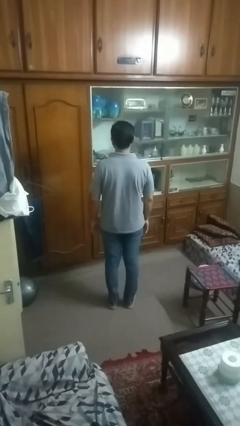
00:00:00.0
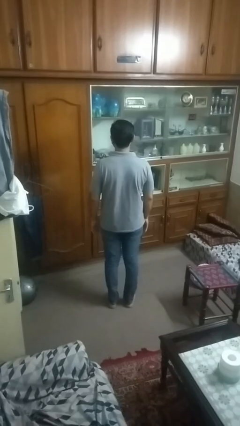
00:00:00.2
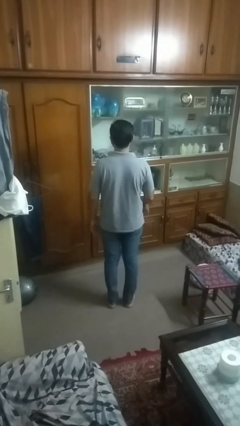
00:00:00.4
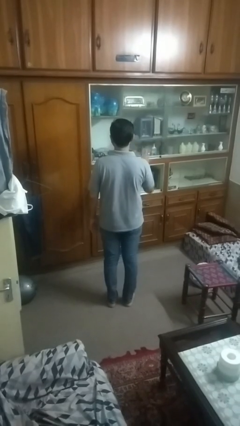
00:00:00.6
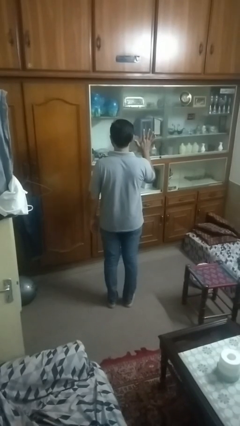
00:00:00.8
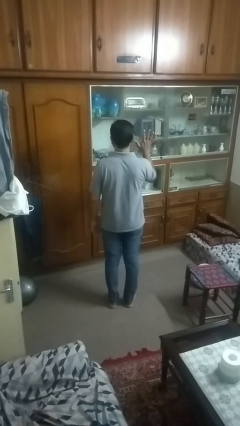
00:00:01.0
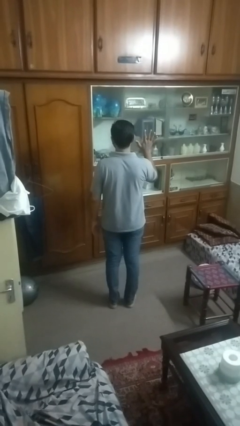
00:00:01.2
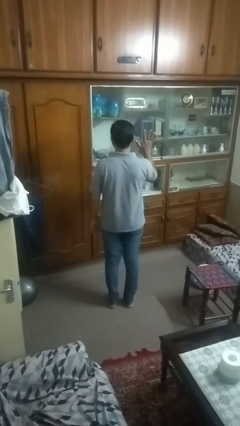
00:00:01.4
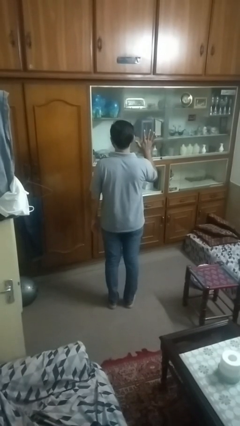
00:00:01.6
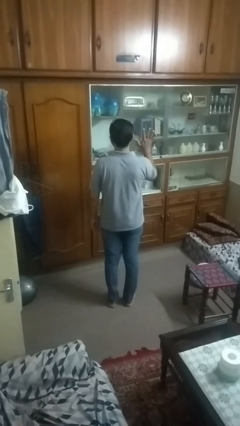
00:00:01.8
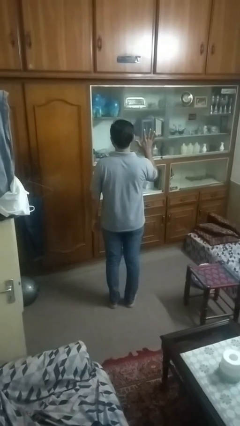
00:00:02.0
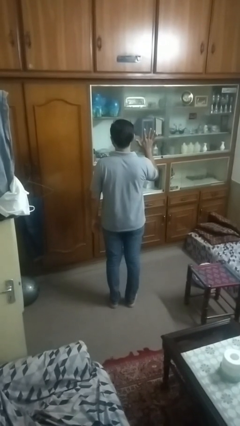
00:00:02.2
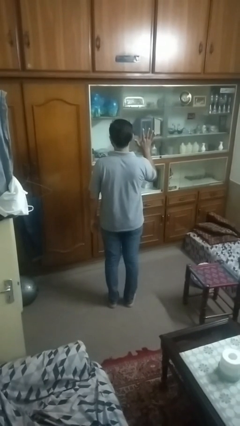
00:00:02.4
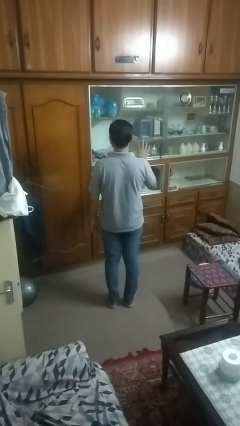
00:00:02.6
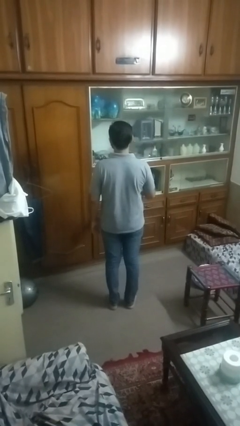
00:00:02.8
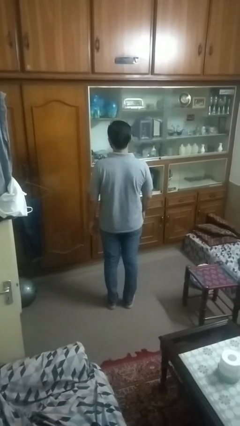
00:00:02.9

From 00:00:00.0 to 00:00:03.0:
person gestures number five

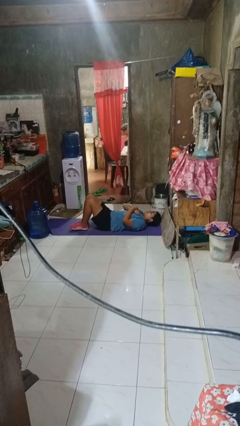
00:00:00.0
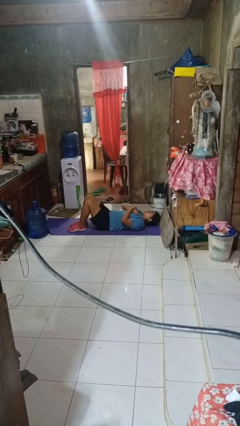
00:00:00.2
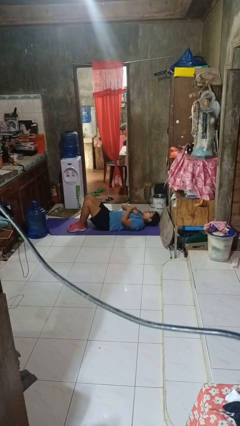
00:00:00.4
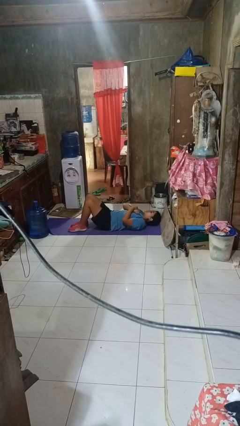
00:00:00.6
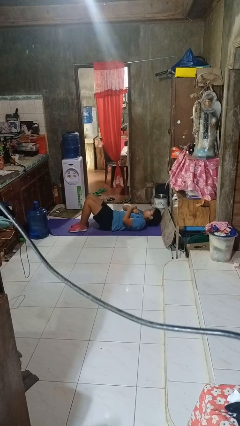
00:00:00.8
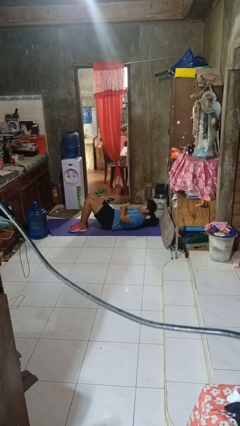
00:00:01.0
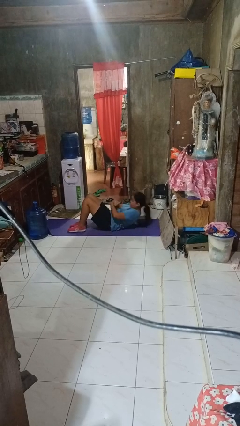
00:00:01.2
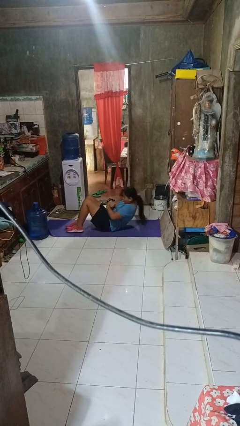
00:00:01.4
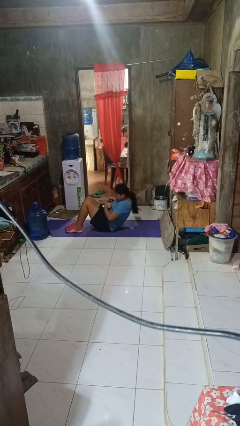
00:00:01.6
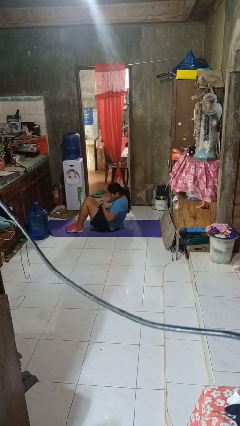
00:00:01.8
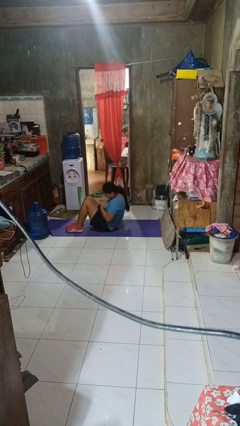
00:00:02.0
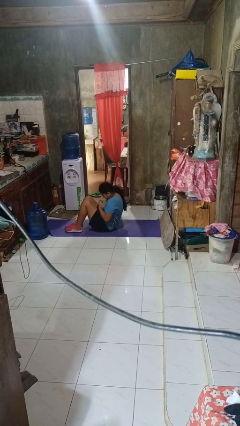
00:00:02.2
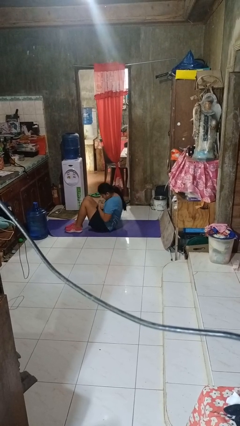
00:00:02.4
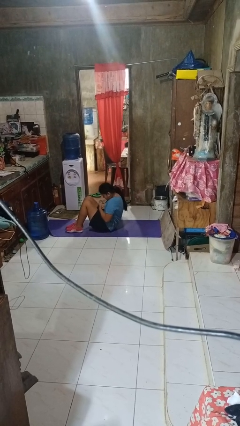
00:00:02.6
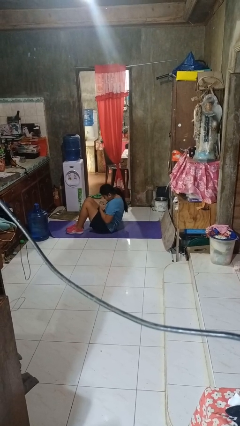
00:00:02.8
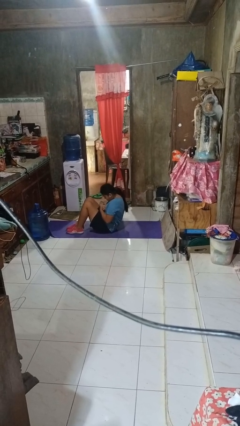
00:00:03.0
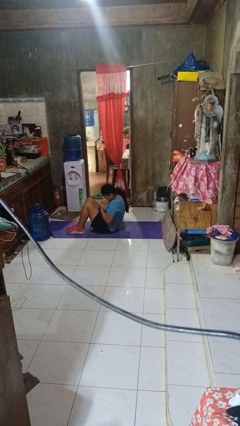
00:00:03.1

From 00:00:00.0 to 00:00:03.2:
person exercises with situp

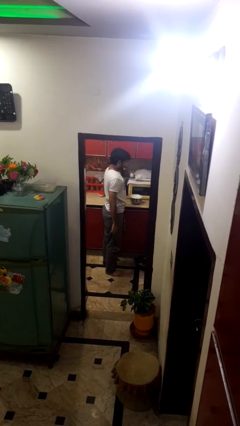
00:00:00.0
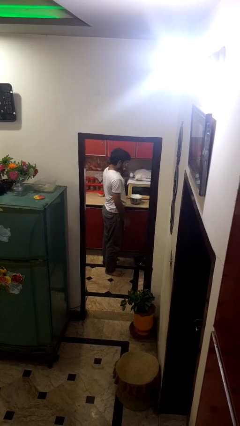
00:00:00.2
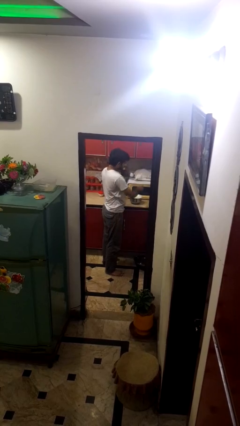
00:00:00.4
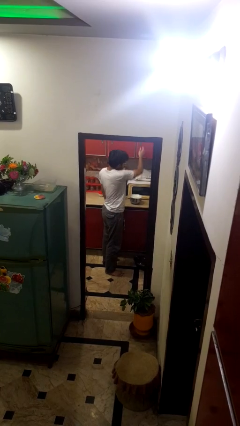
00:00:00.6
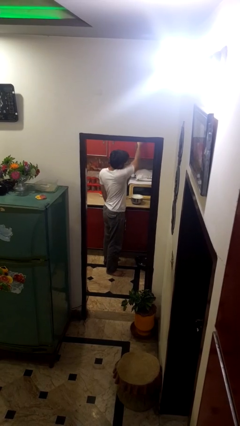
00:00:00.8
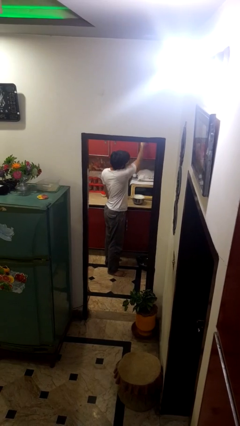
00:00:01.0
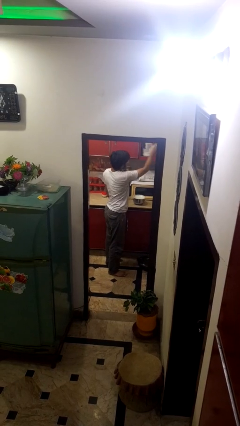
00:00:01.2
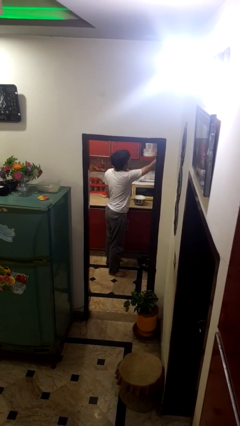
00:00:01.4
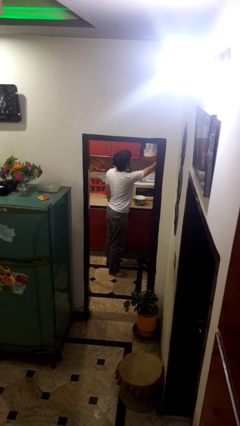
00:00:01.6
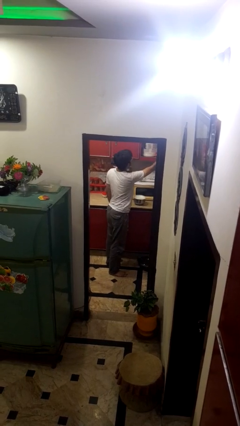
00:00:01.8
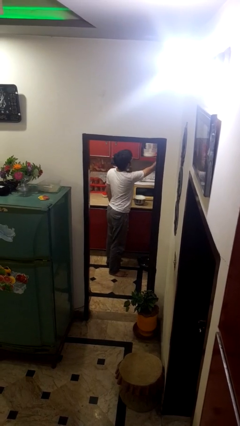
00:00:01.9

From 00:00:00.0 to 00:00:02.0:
person opens cabinet

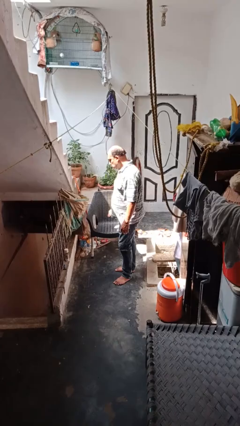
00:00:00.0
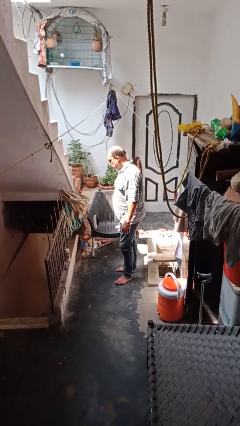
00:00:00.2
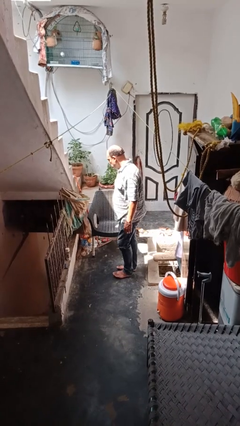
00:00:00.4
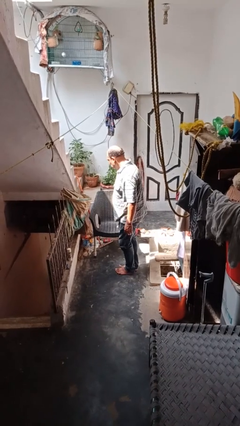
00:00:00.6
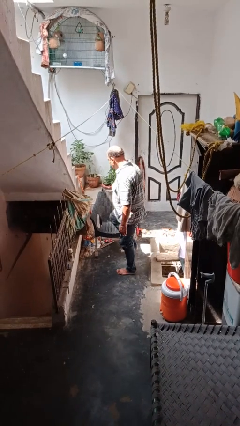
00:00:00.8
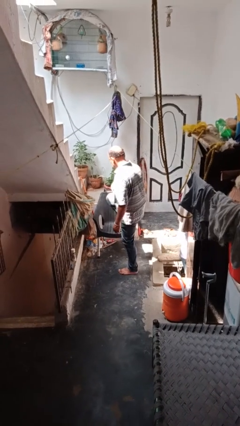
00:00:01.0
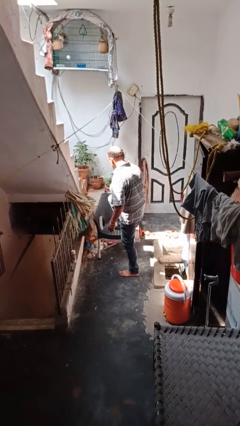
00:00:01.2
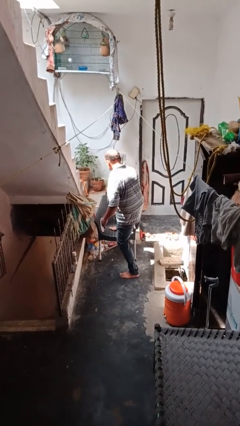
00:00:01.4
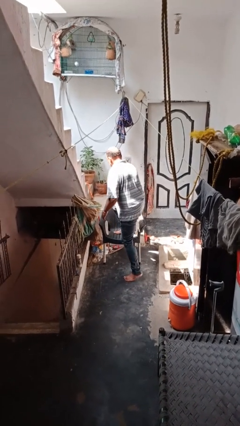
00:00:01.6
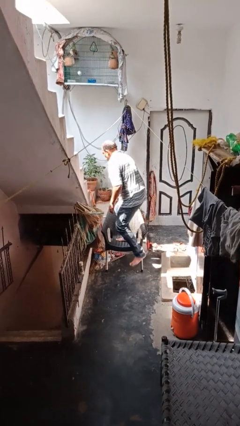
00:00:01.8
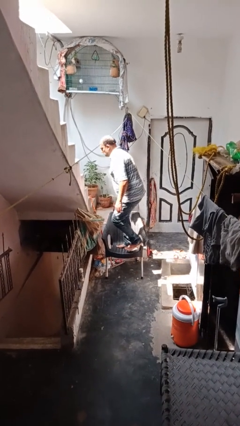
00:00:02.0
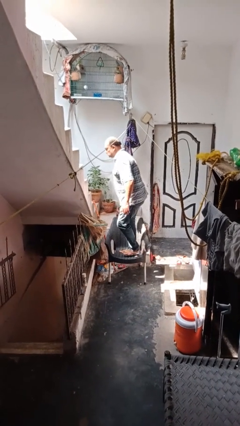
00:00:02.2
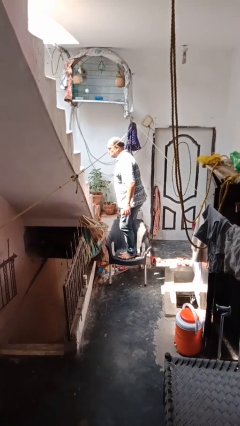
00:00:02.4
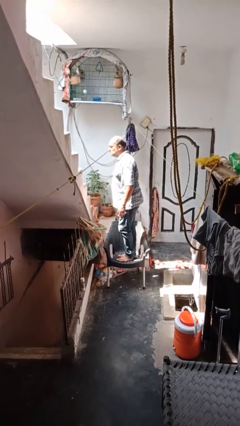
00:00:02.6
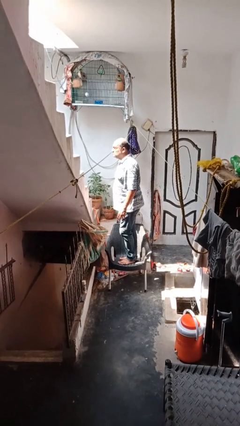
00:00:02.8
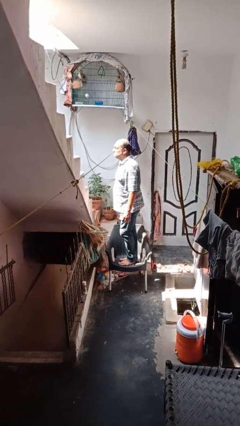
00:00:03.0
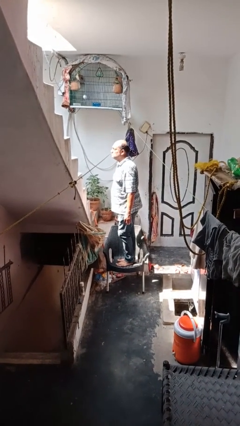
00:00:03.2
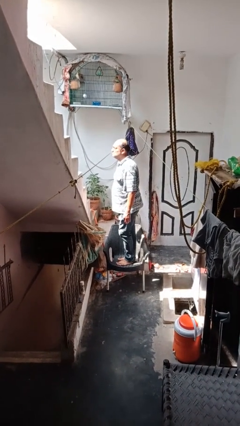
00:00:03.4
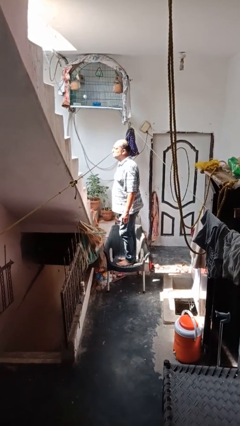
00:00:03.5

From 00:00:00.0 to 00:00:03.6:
person climbs on chair

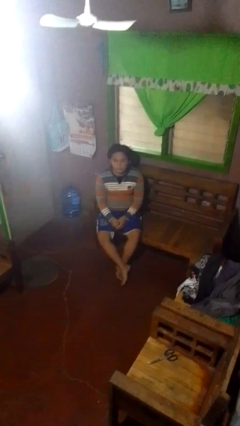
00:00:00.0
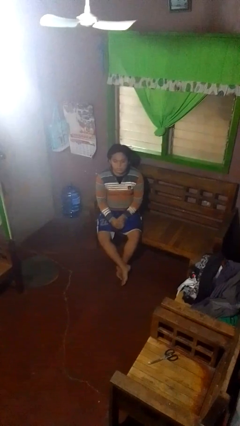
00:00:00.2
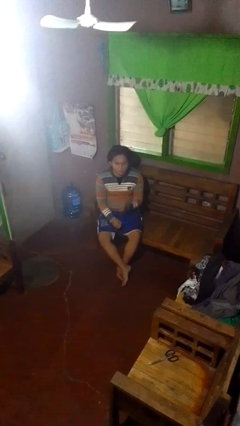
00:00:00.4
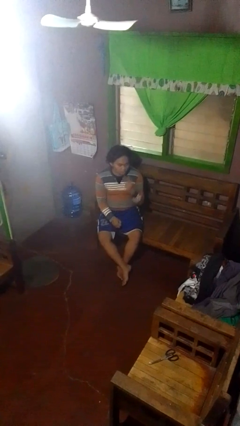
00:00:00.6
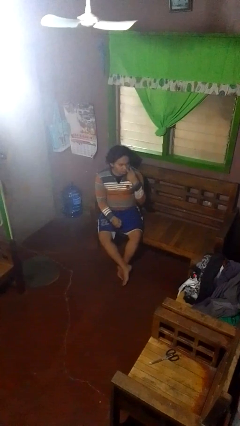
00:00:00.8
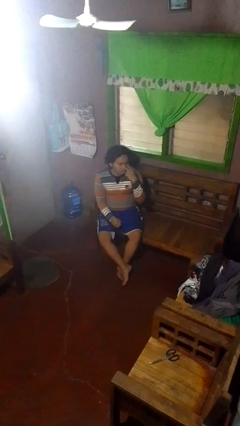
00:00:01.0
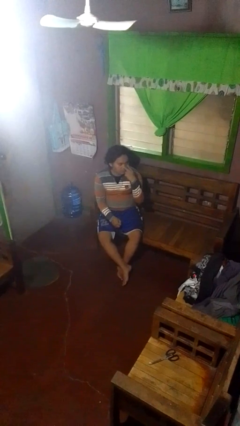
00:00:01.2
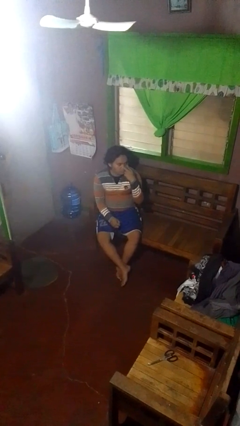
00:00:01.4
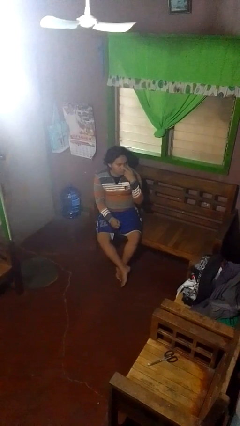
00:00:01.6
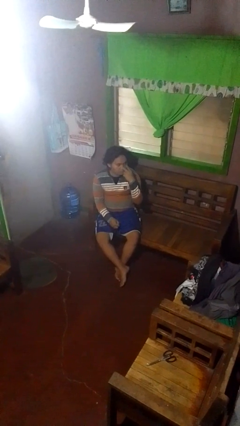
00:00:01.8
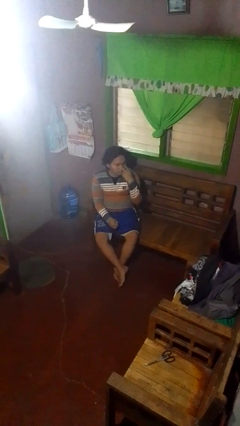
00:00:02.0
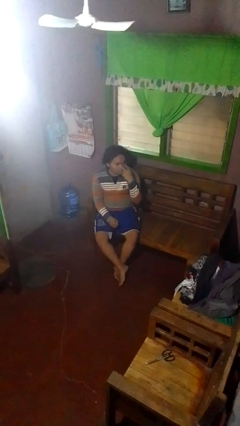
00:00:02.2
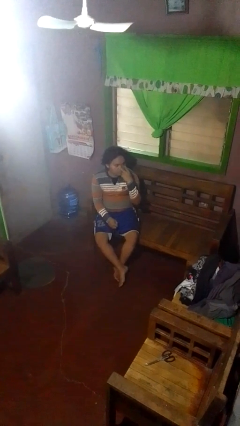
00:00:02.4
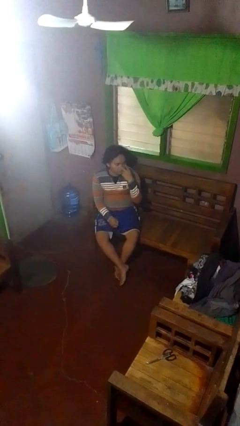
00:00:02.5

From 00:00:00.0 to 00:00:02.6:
person gestures watch closely

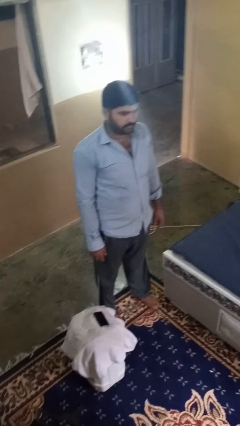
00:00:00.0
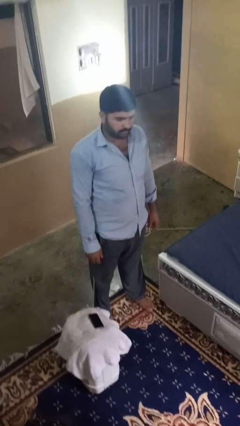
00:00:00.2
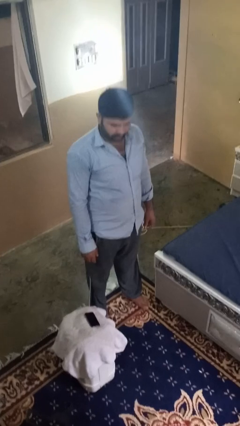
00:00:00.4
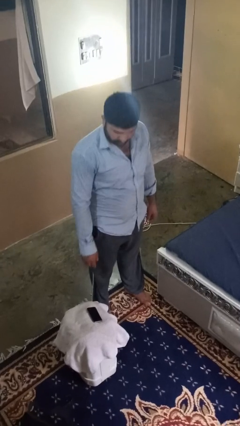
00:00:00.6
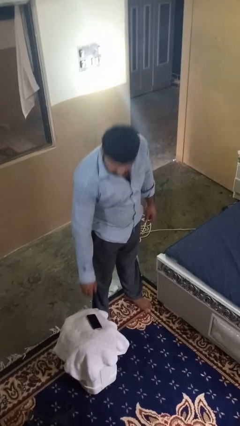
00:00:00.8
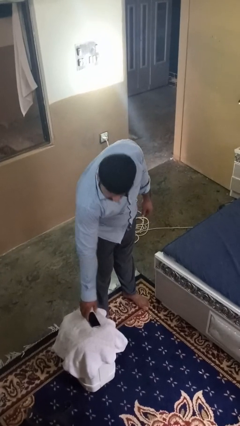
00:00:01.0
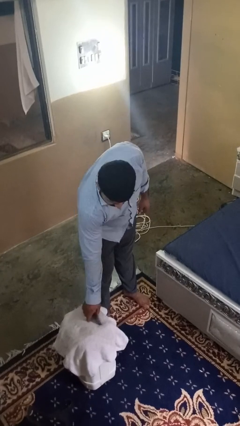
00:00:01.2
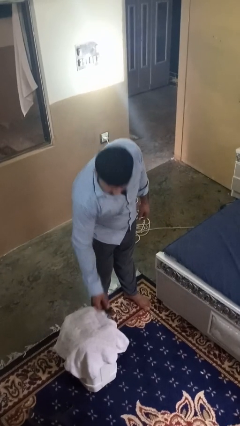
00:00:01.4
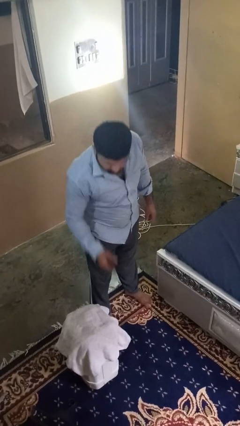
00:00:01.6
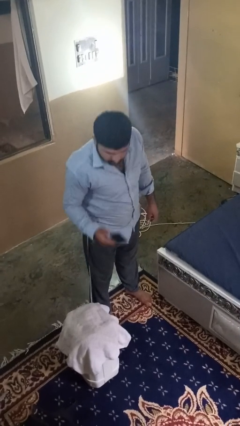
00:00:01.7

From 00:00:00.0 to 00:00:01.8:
person takes phone from pocket

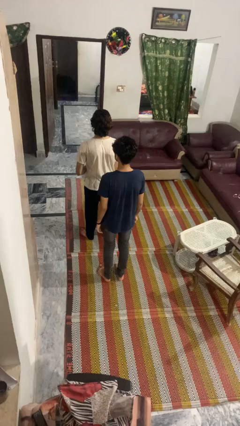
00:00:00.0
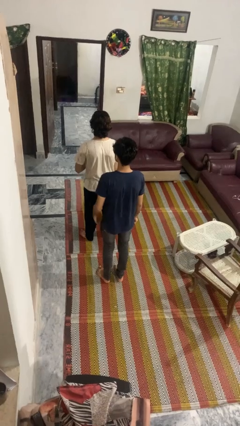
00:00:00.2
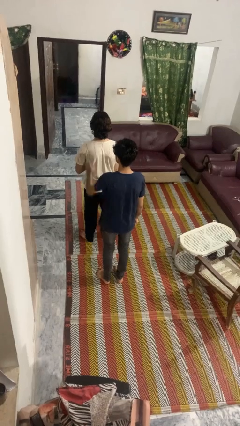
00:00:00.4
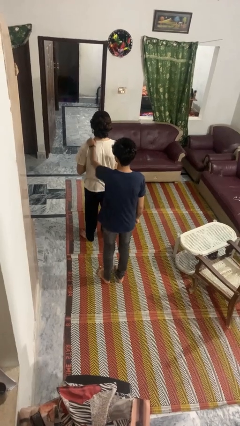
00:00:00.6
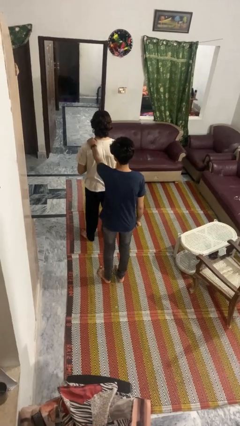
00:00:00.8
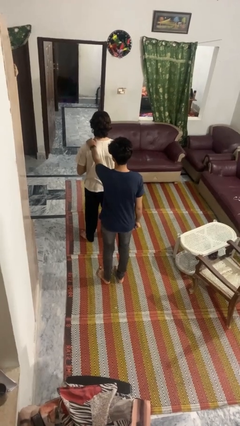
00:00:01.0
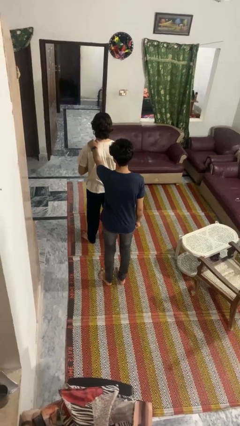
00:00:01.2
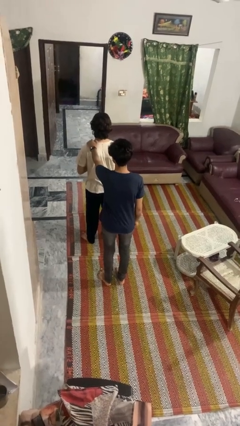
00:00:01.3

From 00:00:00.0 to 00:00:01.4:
person grabs person by shoulder
